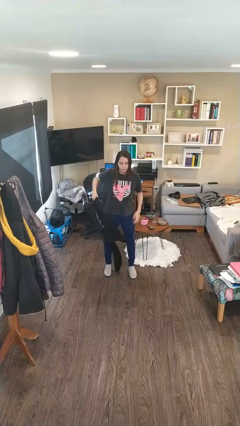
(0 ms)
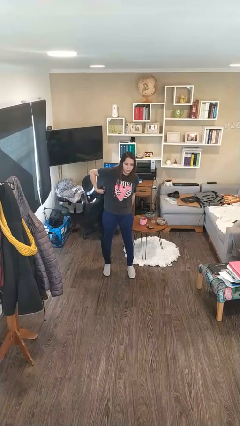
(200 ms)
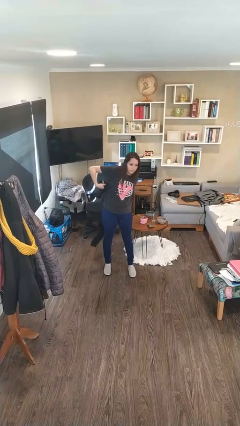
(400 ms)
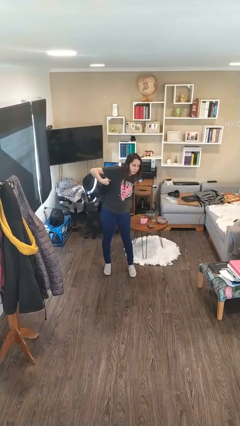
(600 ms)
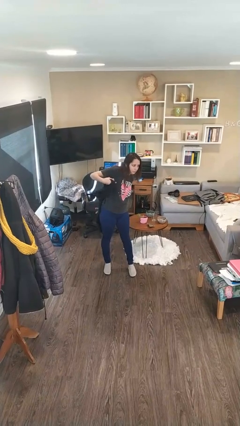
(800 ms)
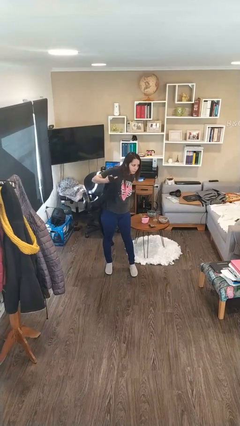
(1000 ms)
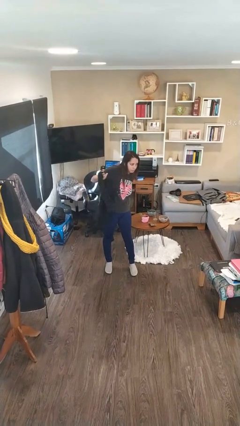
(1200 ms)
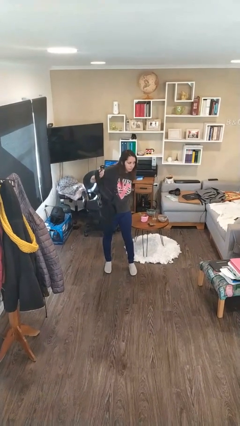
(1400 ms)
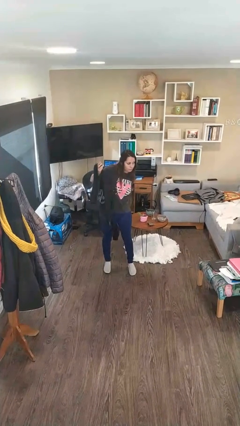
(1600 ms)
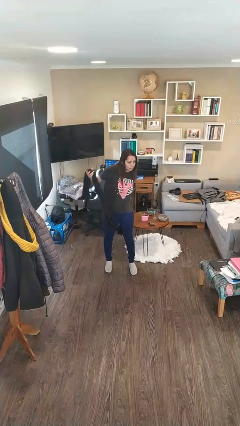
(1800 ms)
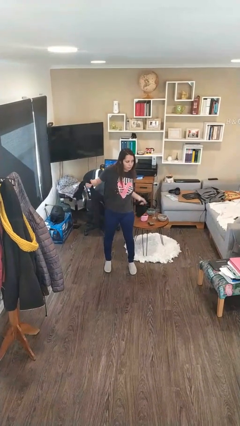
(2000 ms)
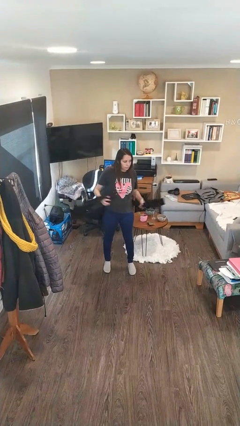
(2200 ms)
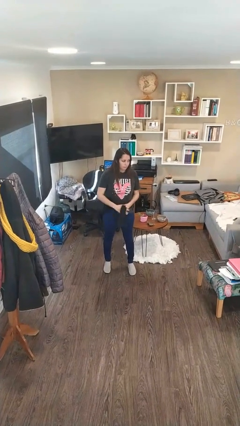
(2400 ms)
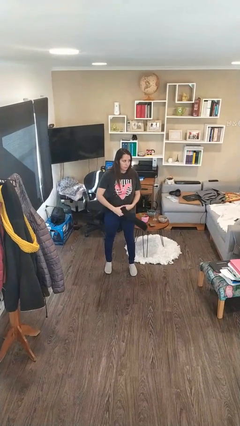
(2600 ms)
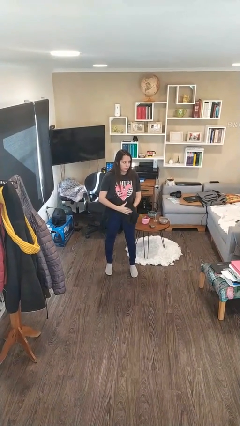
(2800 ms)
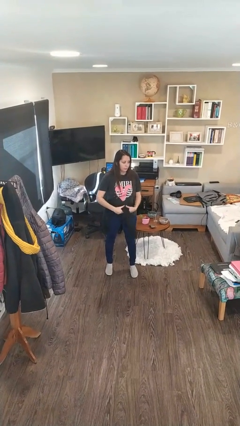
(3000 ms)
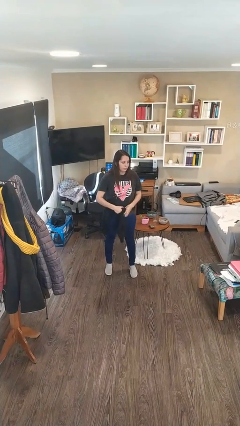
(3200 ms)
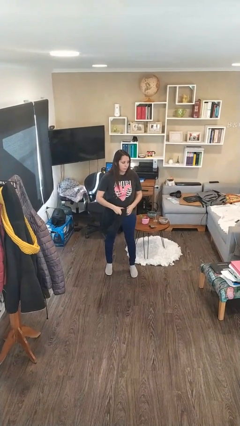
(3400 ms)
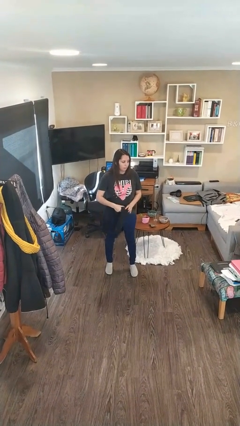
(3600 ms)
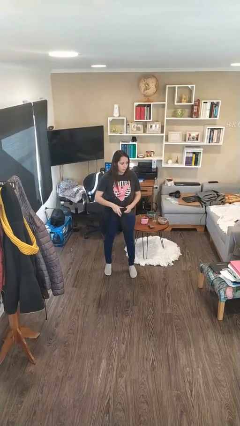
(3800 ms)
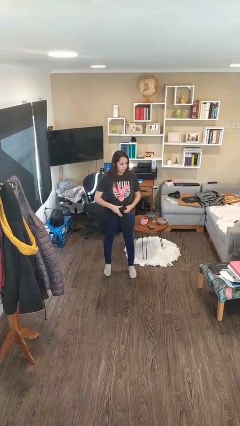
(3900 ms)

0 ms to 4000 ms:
person ties jacket around waist

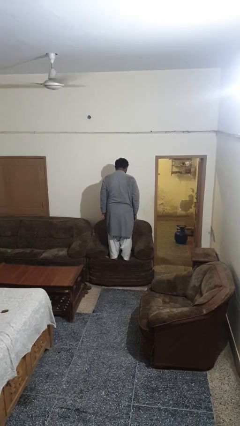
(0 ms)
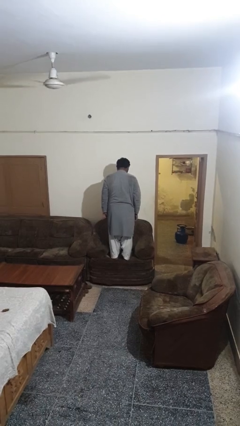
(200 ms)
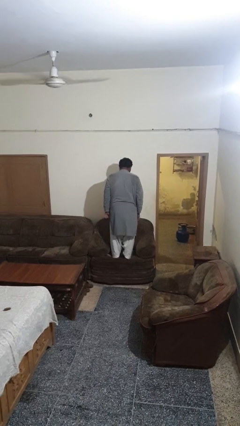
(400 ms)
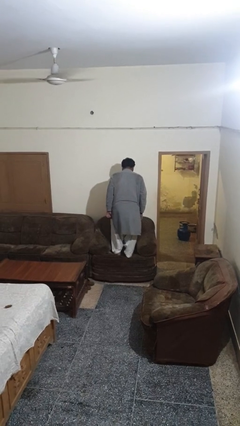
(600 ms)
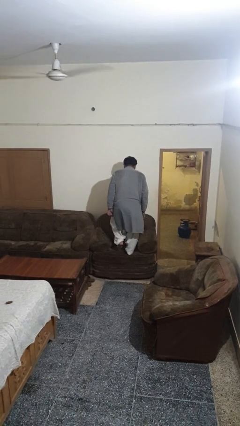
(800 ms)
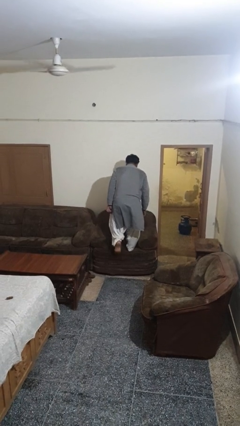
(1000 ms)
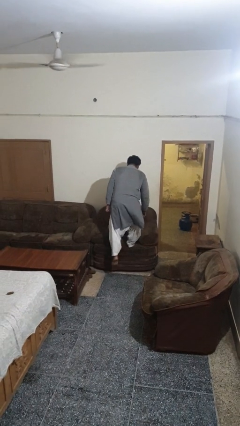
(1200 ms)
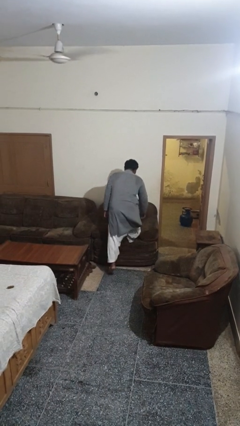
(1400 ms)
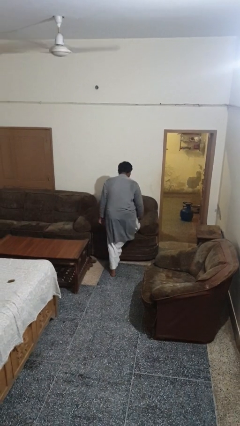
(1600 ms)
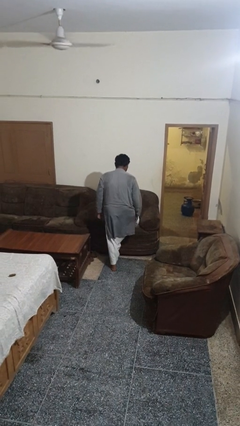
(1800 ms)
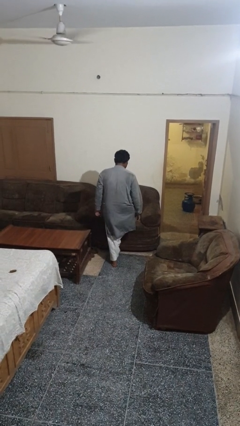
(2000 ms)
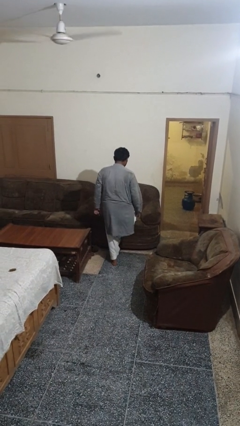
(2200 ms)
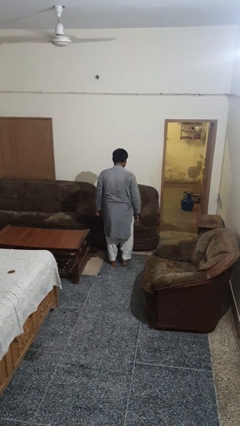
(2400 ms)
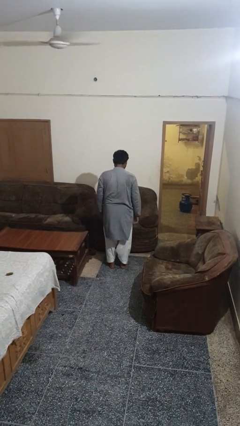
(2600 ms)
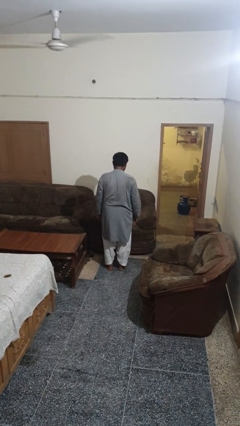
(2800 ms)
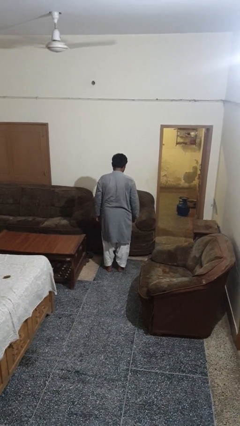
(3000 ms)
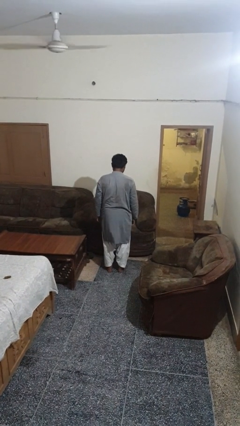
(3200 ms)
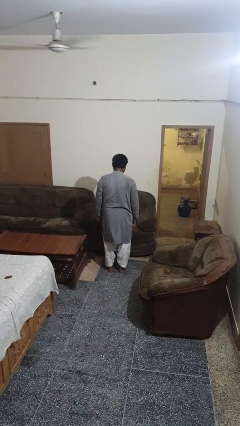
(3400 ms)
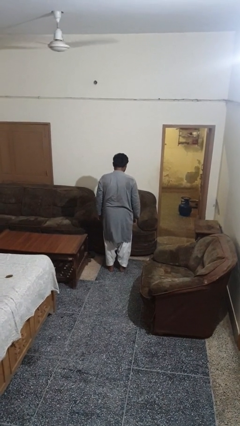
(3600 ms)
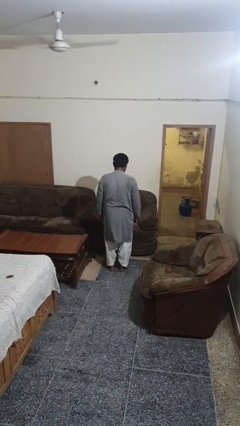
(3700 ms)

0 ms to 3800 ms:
person climbs off couch

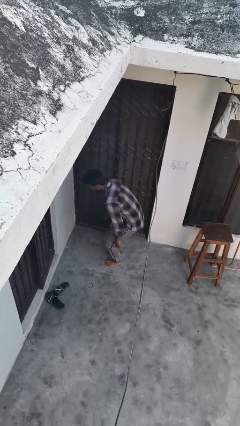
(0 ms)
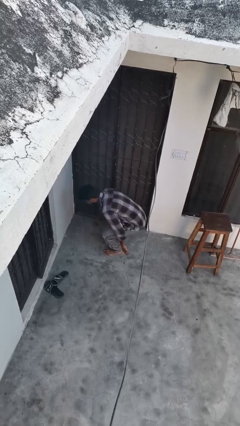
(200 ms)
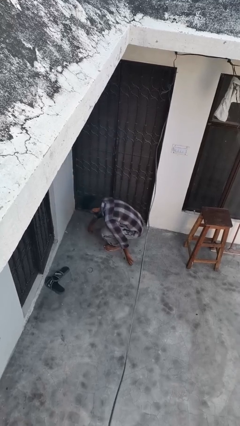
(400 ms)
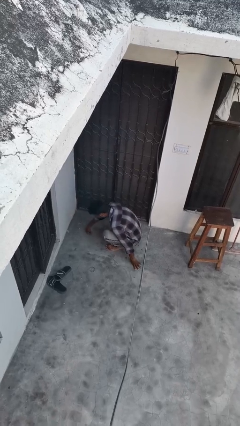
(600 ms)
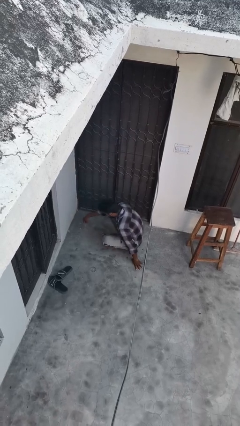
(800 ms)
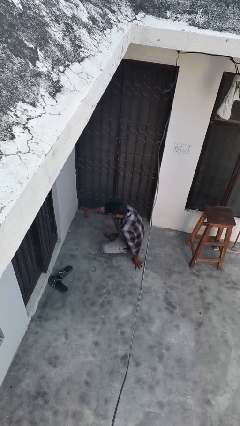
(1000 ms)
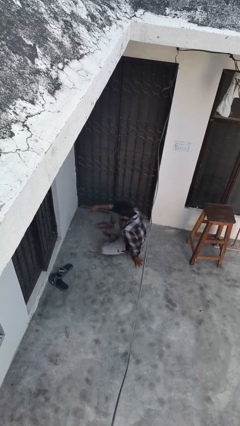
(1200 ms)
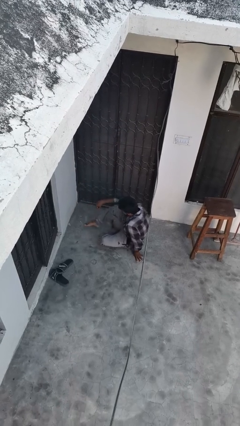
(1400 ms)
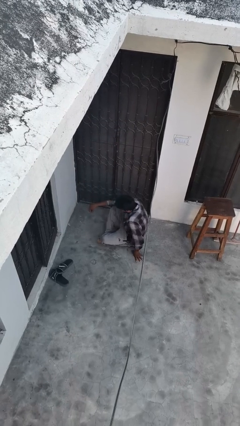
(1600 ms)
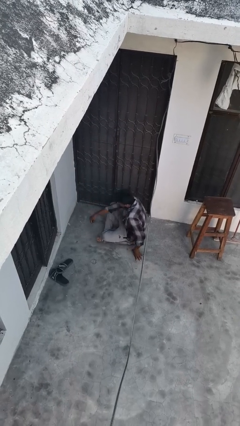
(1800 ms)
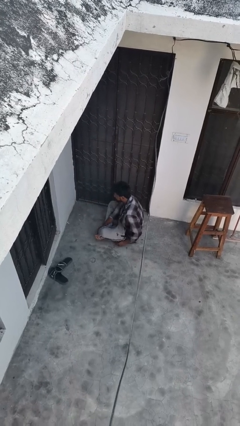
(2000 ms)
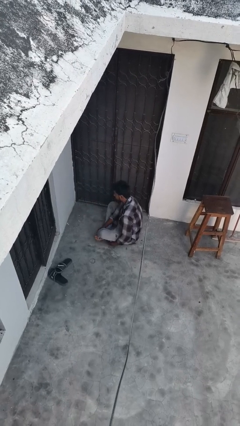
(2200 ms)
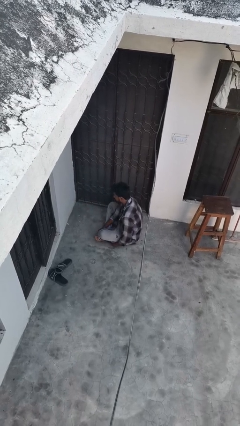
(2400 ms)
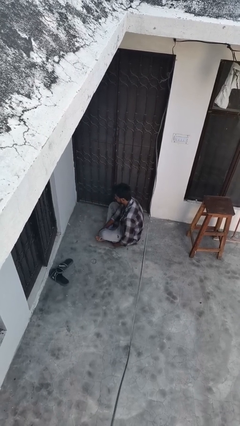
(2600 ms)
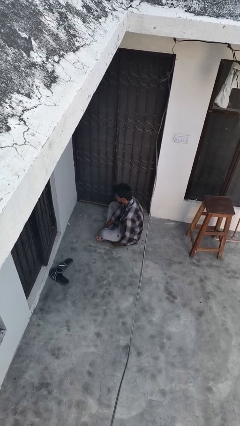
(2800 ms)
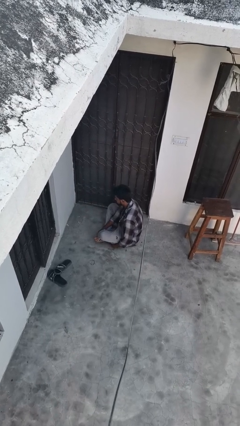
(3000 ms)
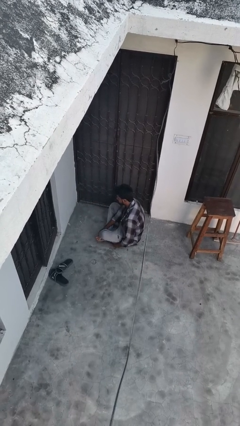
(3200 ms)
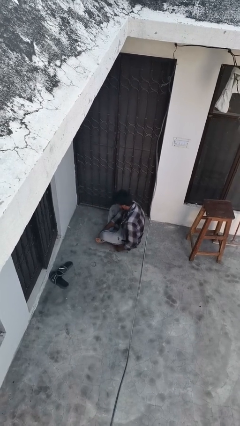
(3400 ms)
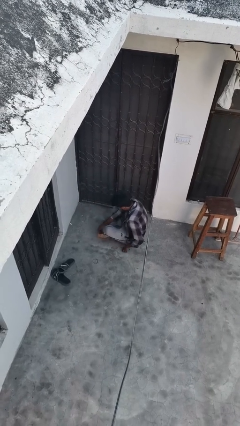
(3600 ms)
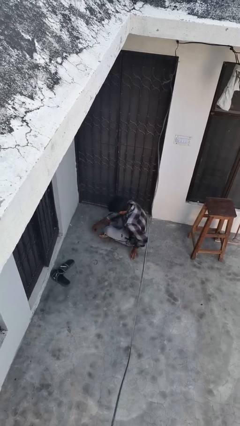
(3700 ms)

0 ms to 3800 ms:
person sits crisscross

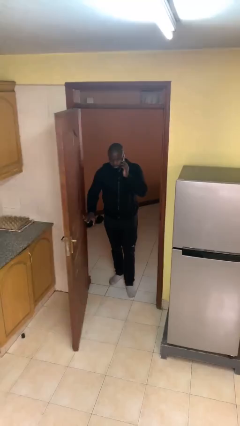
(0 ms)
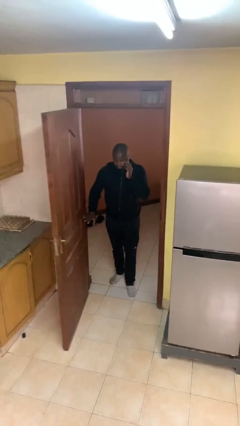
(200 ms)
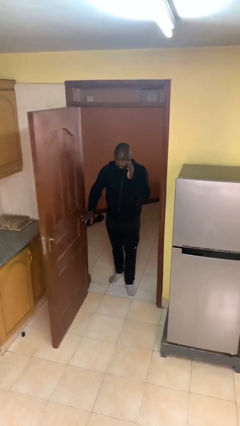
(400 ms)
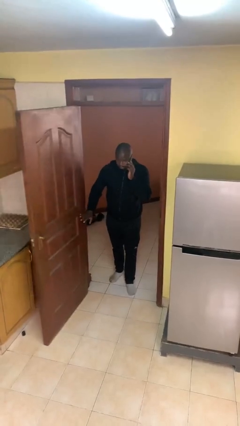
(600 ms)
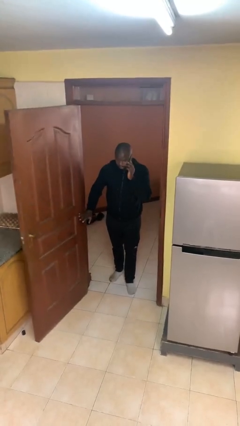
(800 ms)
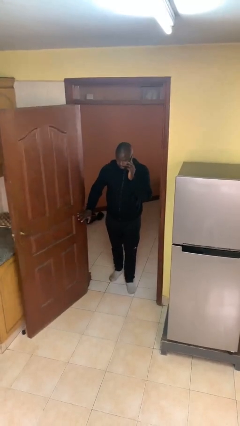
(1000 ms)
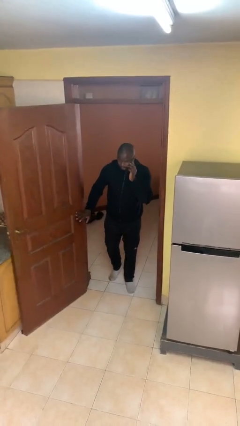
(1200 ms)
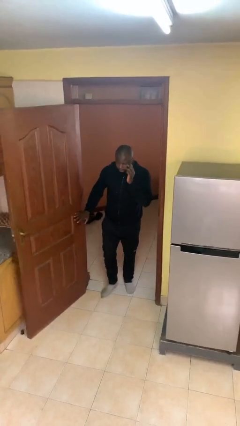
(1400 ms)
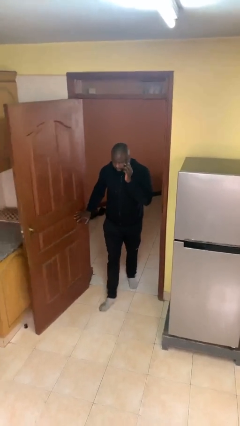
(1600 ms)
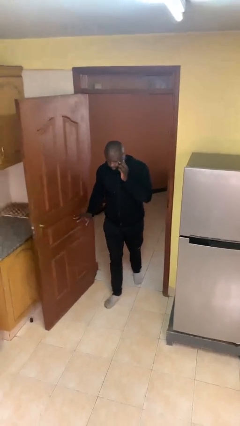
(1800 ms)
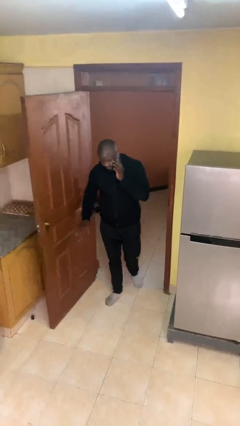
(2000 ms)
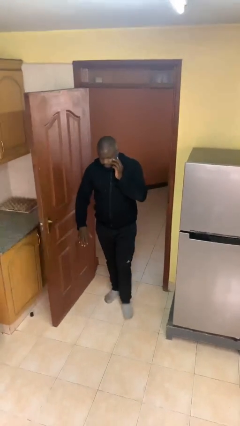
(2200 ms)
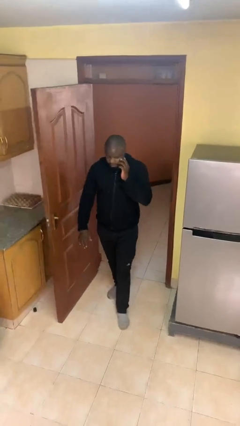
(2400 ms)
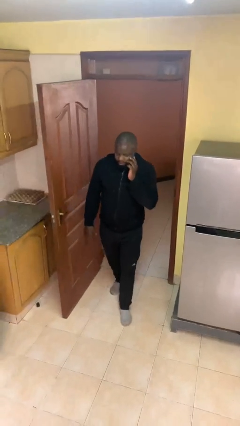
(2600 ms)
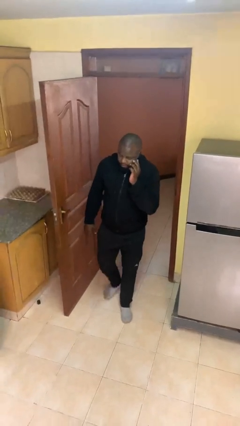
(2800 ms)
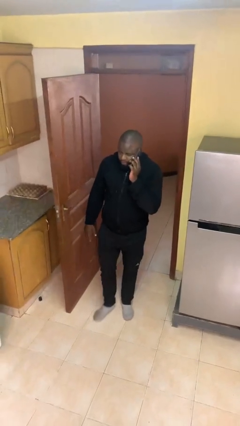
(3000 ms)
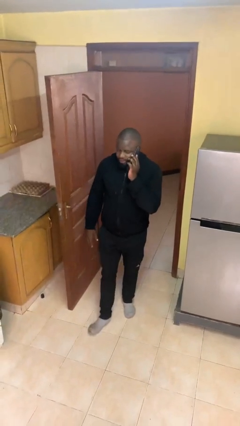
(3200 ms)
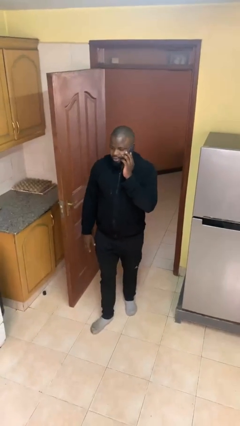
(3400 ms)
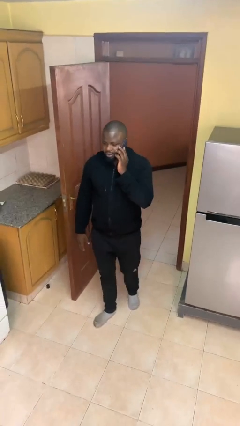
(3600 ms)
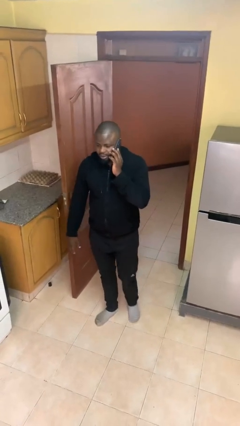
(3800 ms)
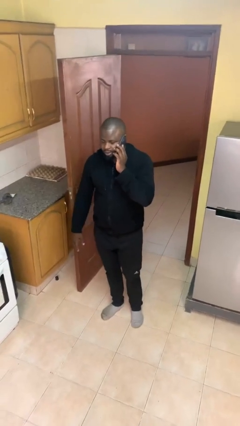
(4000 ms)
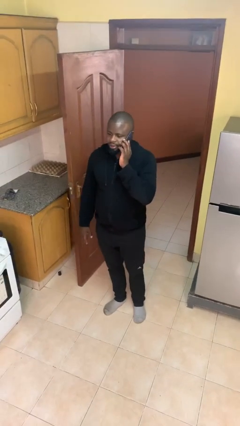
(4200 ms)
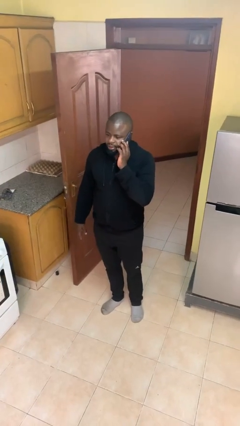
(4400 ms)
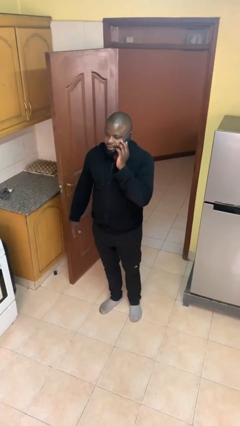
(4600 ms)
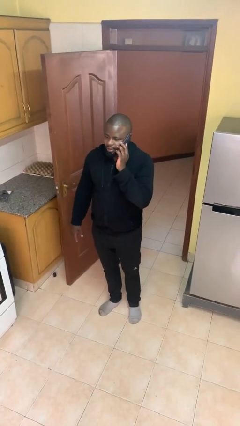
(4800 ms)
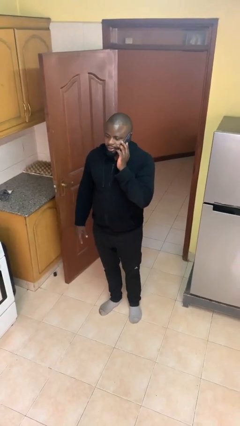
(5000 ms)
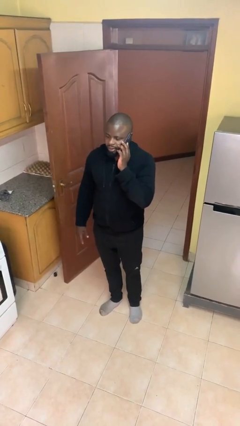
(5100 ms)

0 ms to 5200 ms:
person enters scene through structure

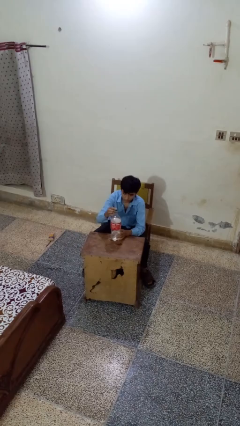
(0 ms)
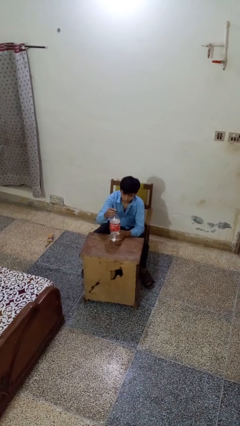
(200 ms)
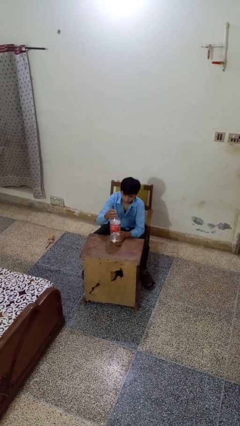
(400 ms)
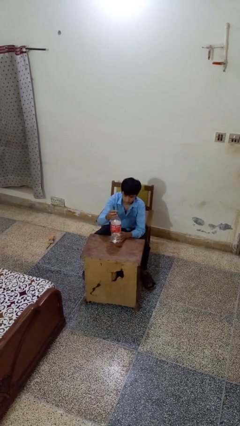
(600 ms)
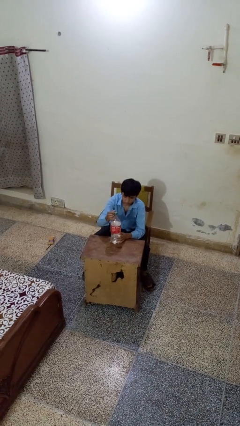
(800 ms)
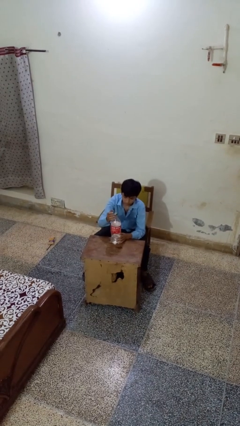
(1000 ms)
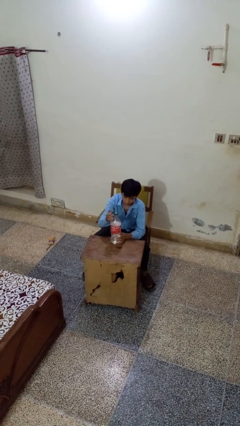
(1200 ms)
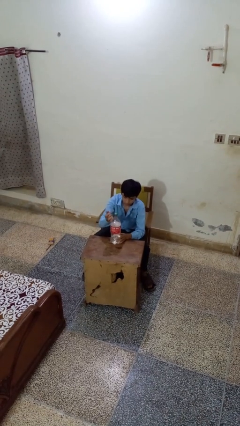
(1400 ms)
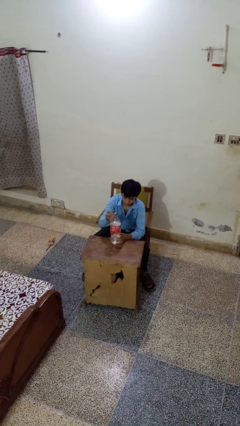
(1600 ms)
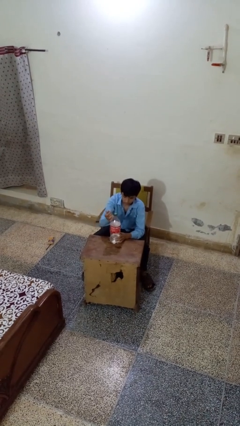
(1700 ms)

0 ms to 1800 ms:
person screws lid to bottle
